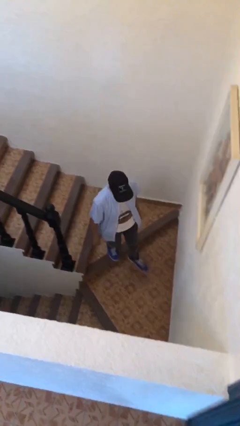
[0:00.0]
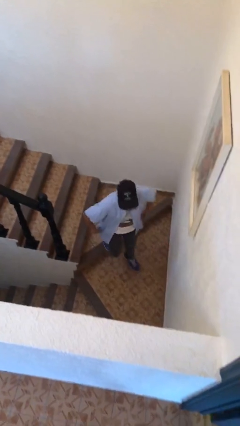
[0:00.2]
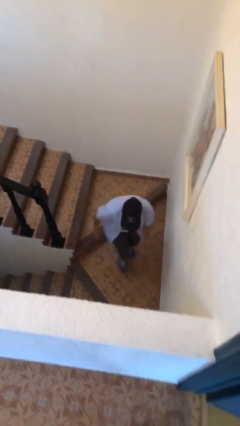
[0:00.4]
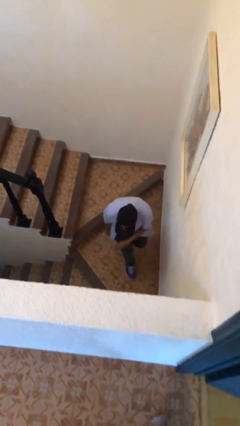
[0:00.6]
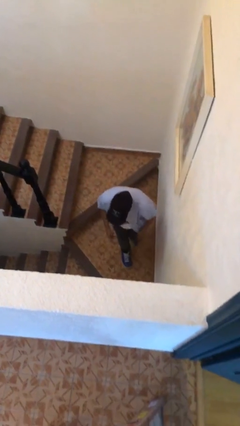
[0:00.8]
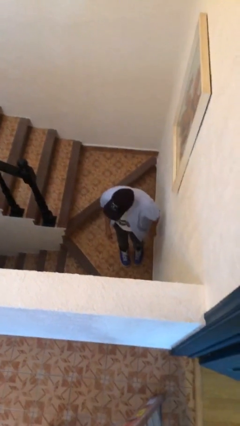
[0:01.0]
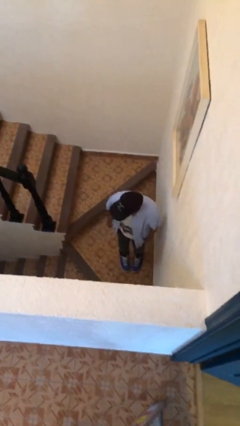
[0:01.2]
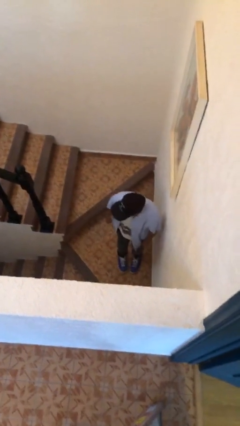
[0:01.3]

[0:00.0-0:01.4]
person trips on stair

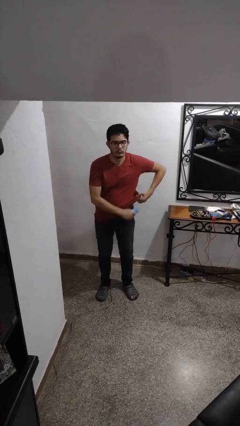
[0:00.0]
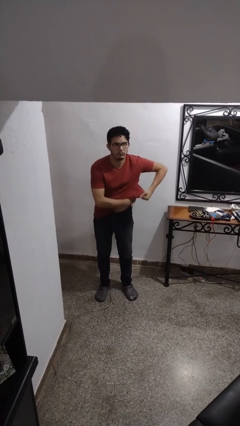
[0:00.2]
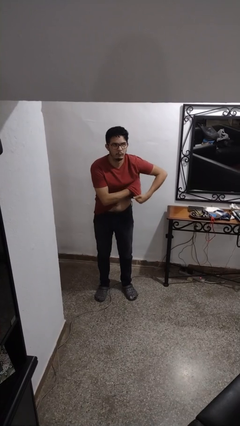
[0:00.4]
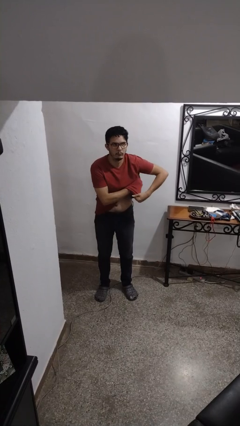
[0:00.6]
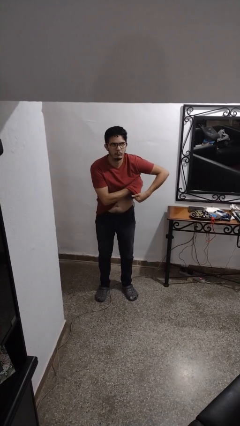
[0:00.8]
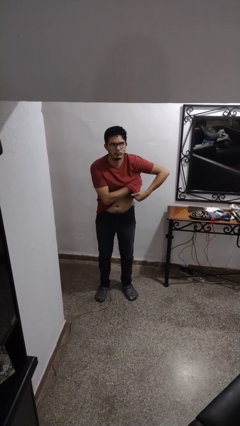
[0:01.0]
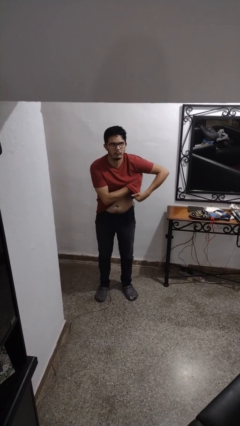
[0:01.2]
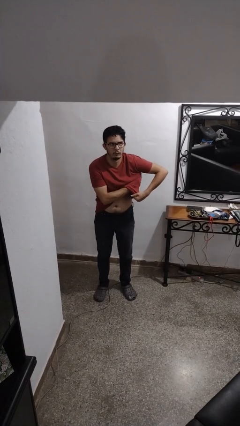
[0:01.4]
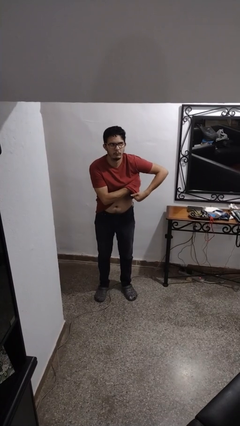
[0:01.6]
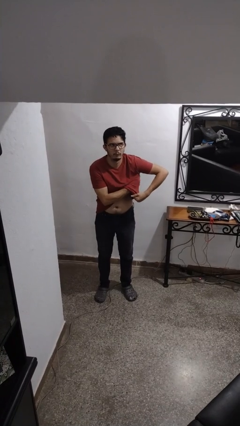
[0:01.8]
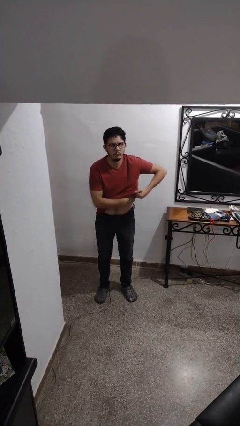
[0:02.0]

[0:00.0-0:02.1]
person applies deodorant

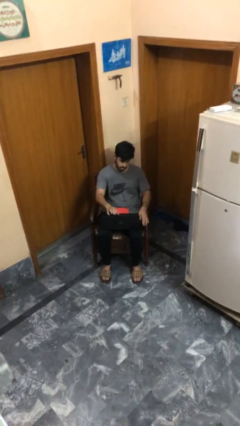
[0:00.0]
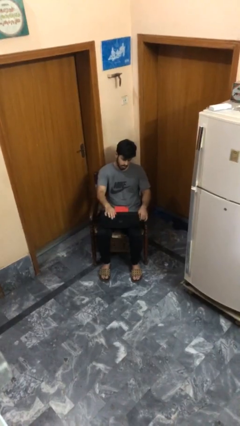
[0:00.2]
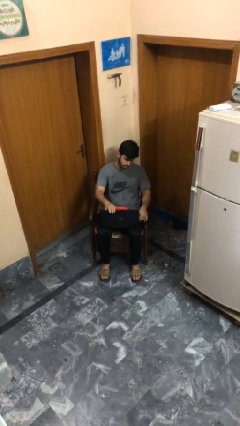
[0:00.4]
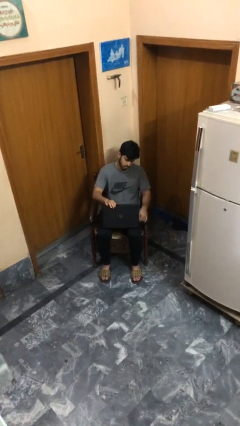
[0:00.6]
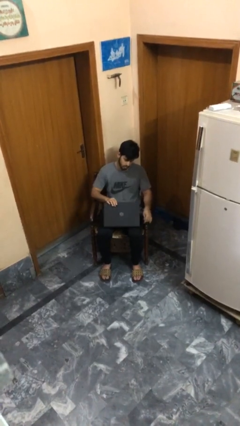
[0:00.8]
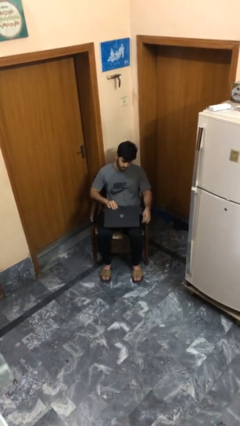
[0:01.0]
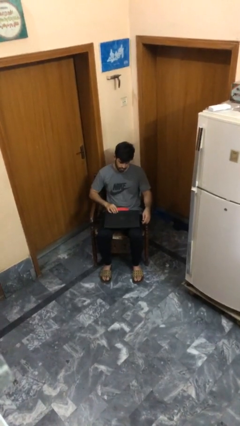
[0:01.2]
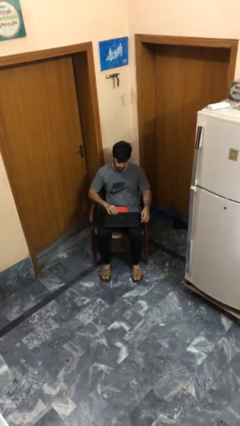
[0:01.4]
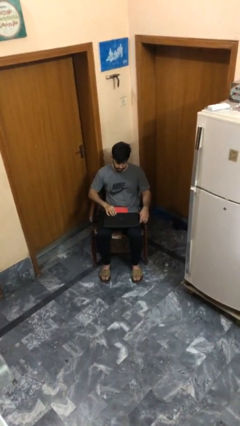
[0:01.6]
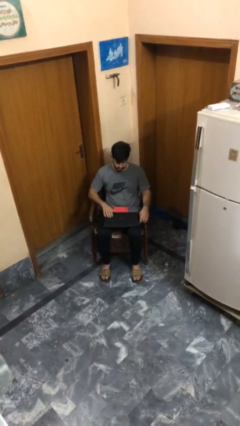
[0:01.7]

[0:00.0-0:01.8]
person closes laptop

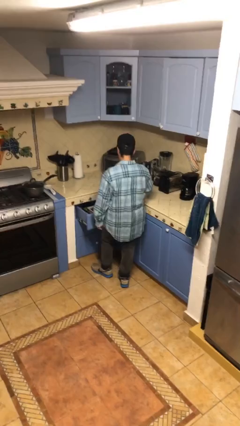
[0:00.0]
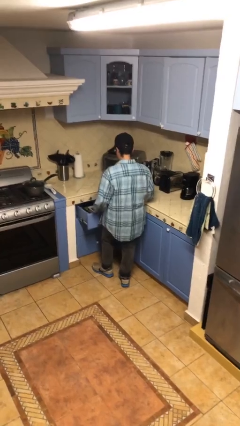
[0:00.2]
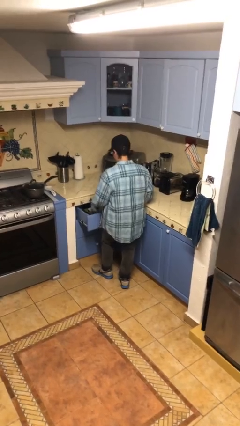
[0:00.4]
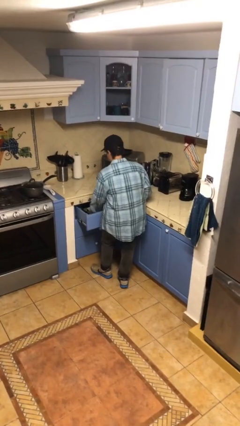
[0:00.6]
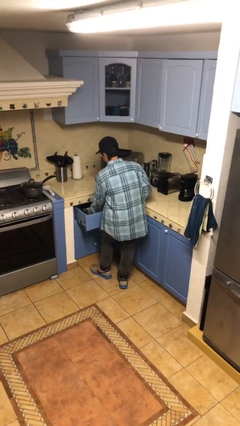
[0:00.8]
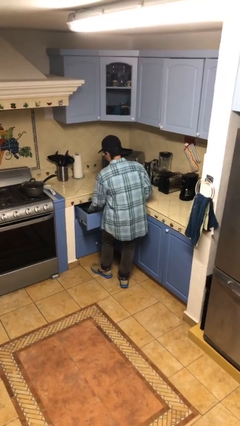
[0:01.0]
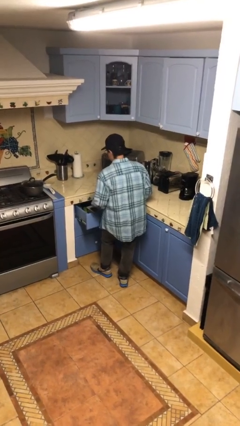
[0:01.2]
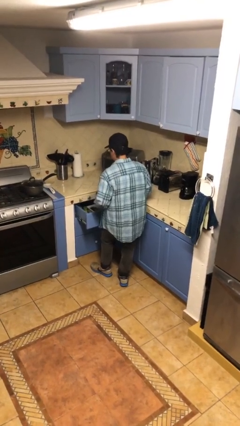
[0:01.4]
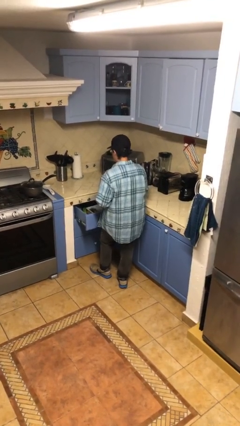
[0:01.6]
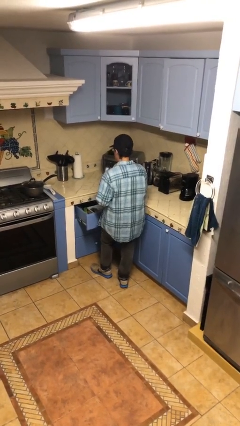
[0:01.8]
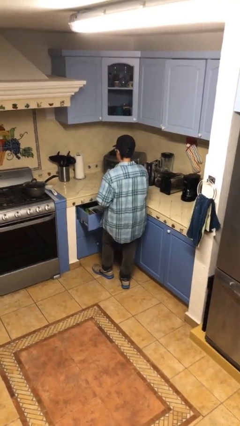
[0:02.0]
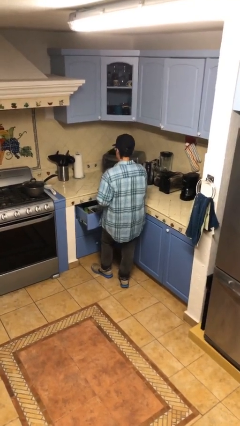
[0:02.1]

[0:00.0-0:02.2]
person takes object from kitchen drawer

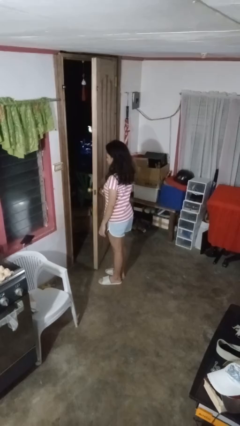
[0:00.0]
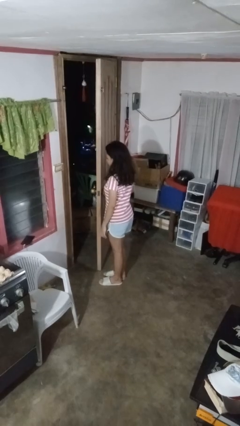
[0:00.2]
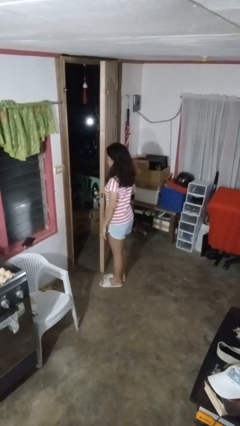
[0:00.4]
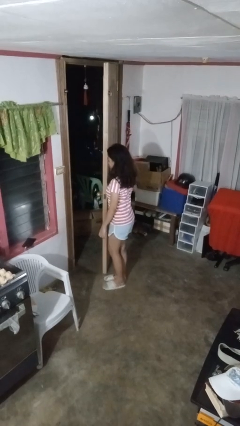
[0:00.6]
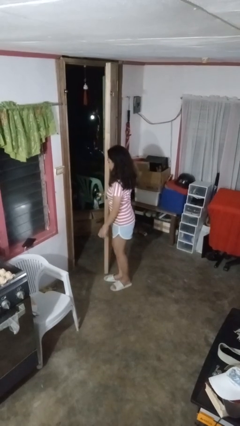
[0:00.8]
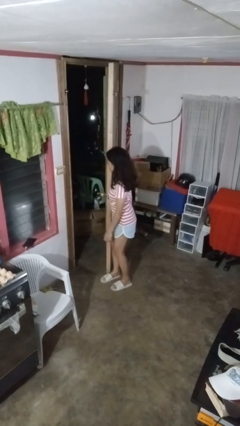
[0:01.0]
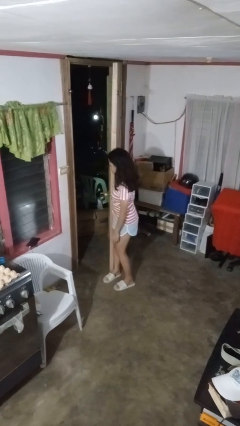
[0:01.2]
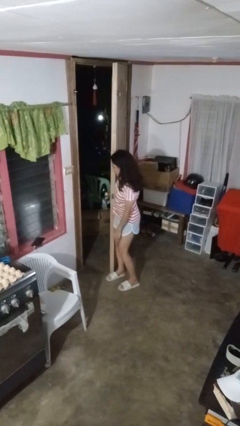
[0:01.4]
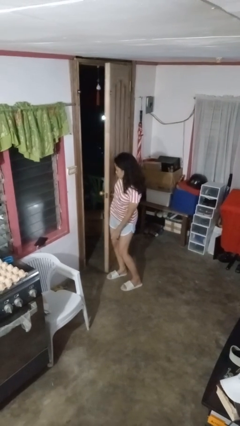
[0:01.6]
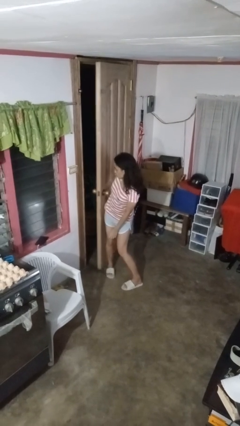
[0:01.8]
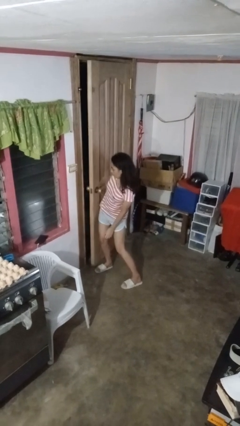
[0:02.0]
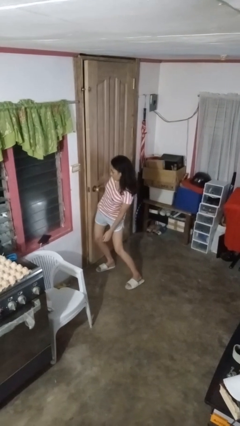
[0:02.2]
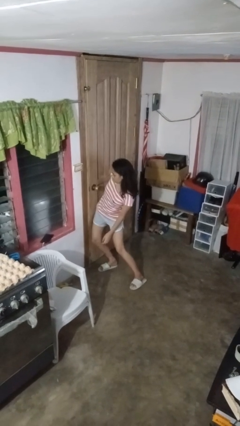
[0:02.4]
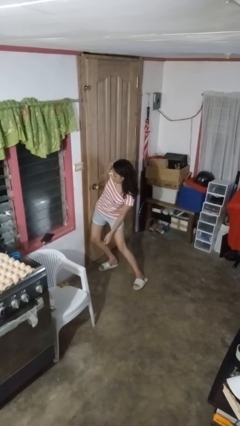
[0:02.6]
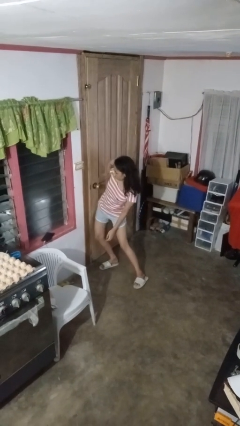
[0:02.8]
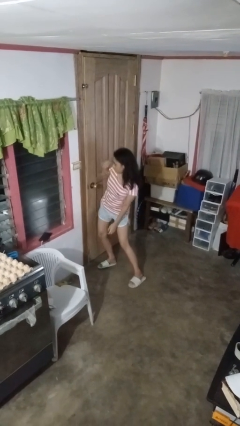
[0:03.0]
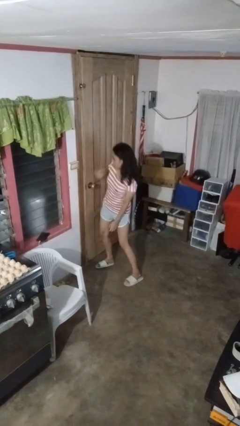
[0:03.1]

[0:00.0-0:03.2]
person closes door with hip

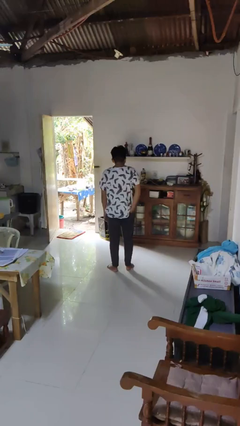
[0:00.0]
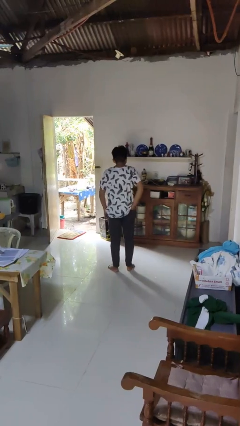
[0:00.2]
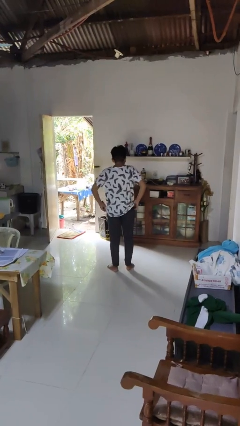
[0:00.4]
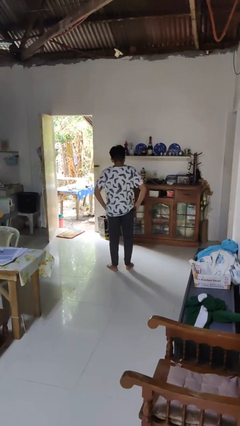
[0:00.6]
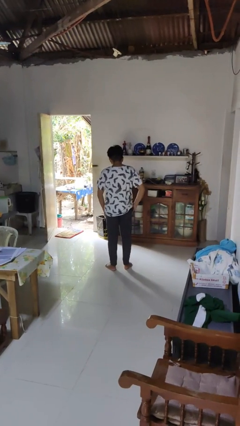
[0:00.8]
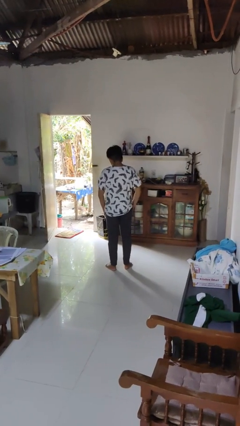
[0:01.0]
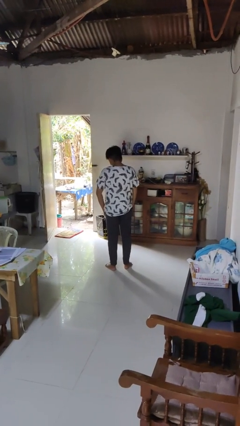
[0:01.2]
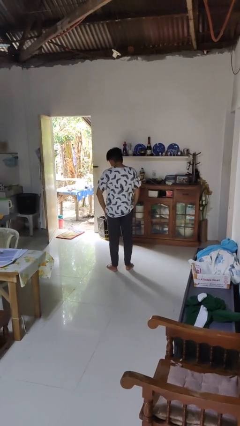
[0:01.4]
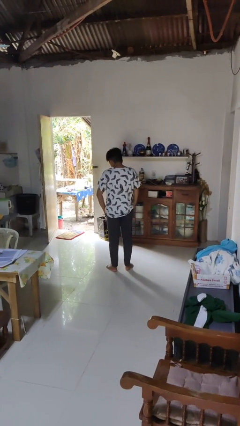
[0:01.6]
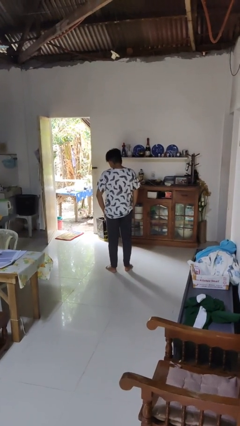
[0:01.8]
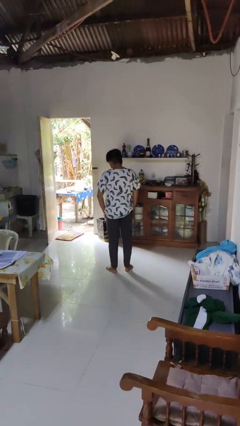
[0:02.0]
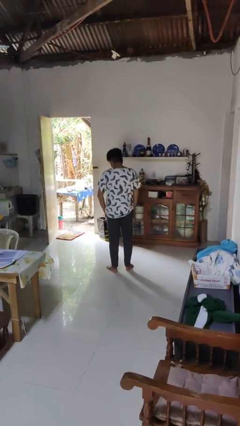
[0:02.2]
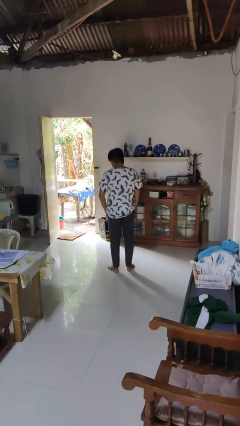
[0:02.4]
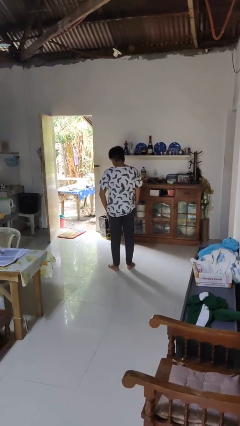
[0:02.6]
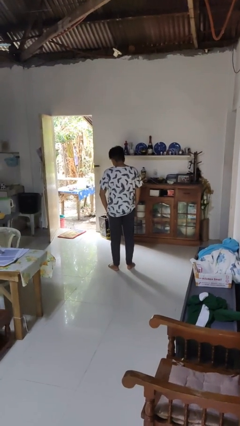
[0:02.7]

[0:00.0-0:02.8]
person puts hands in back pockets

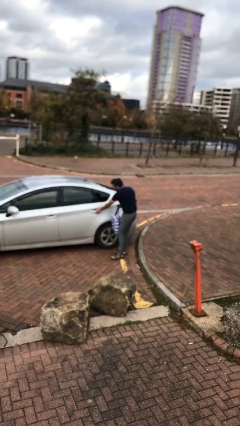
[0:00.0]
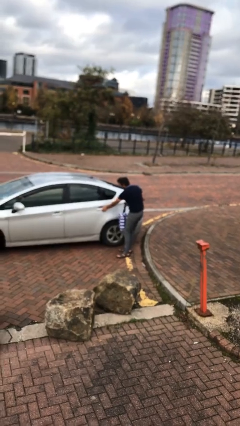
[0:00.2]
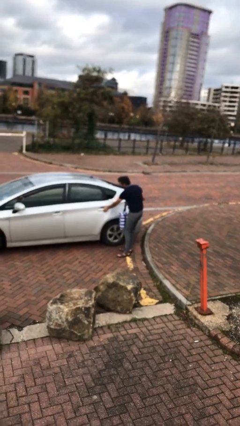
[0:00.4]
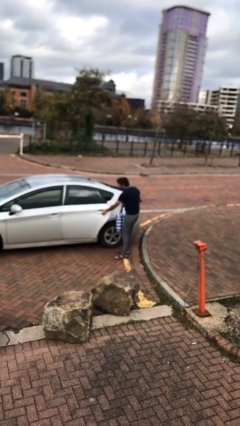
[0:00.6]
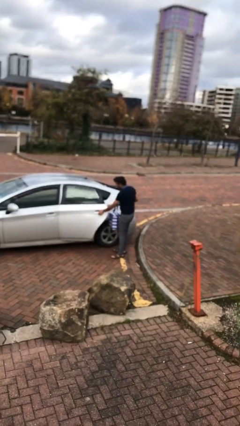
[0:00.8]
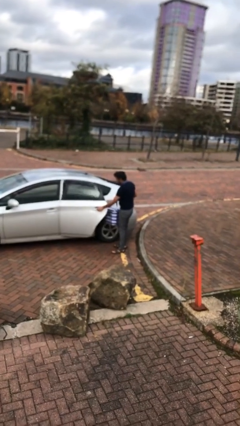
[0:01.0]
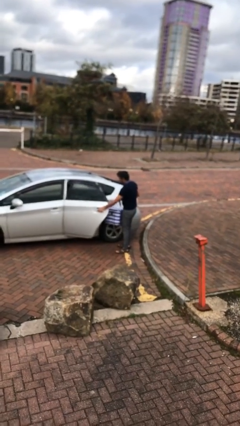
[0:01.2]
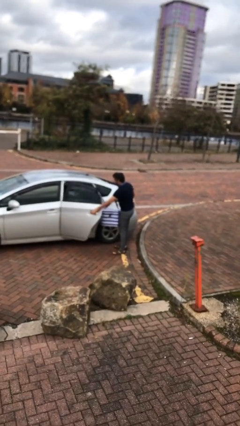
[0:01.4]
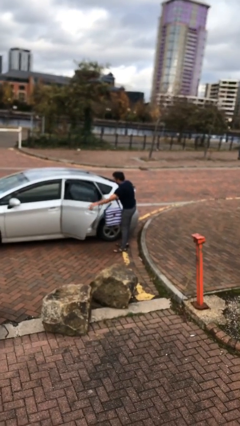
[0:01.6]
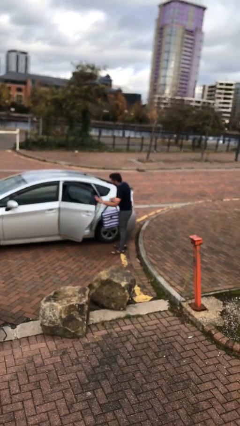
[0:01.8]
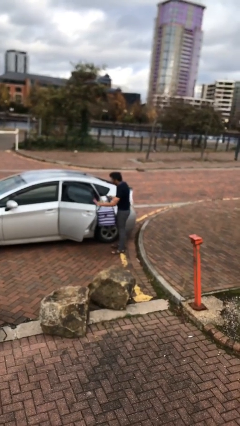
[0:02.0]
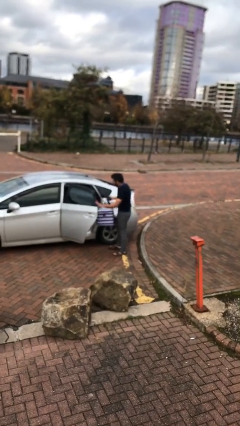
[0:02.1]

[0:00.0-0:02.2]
person opens car door

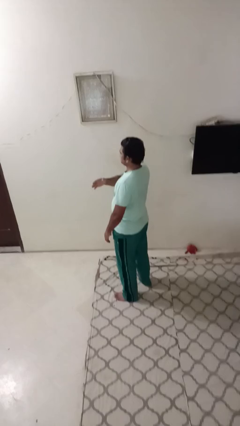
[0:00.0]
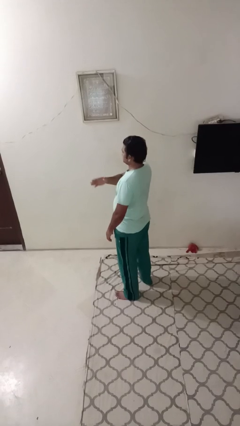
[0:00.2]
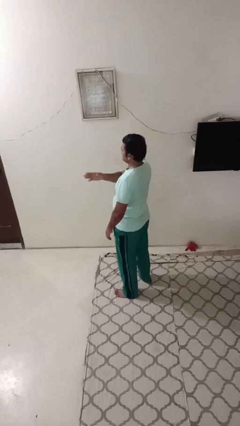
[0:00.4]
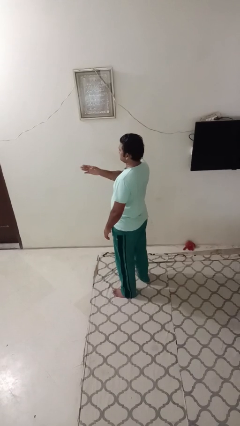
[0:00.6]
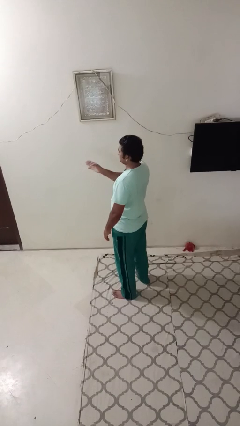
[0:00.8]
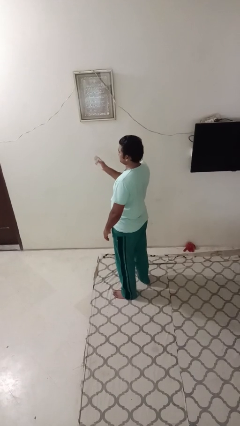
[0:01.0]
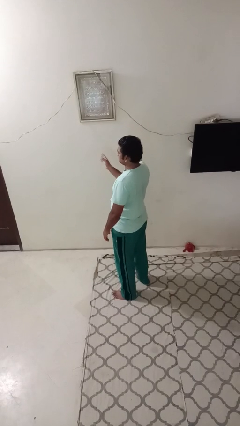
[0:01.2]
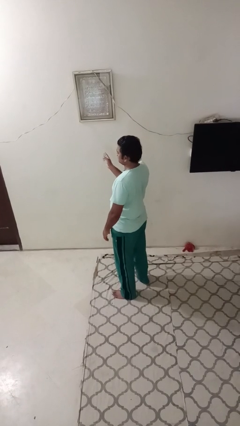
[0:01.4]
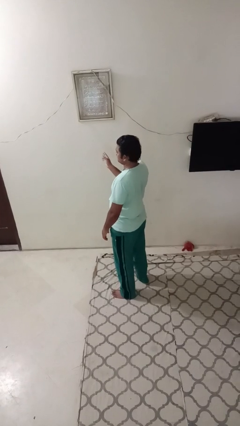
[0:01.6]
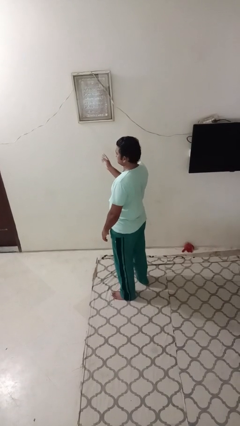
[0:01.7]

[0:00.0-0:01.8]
person gestures swipe right
